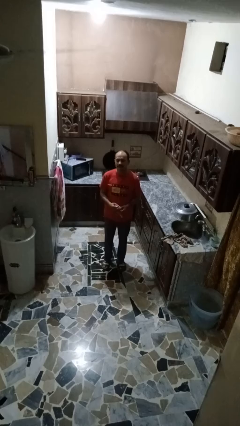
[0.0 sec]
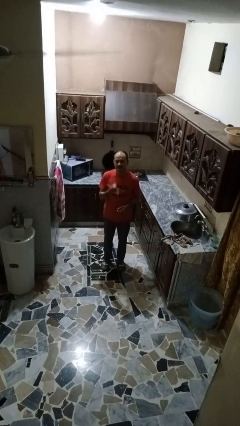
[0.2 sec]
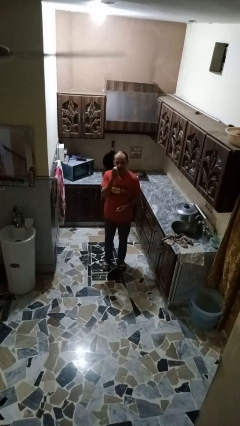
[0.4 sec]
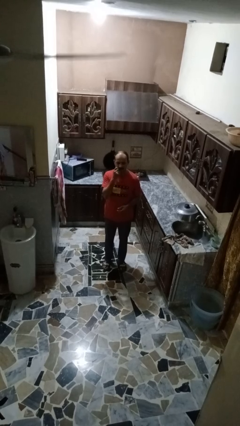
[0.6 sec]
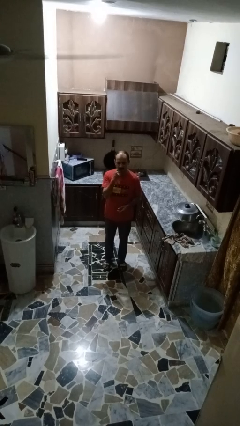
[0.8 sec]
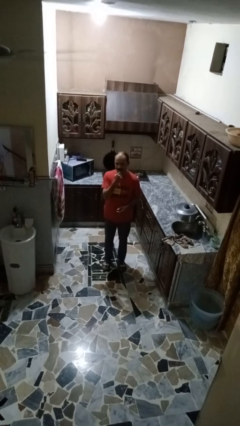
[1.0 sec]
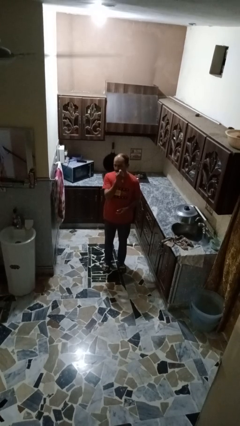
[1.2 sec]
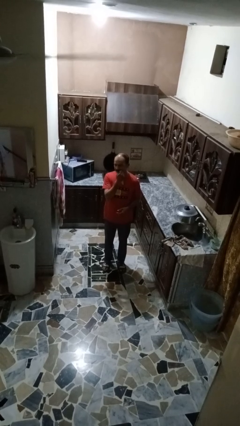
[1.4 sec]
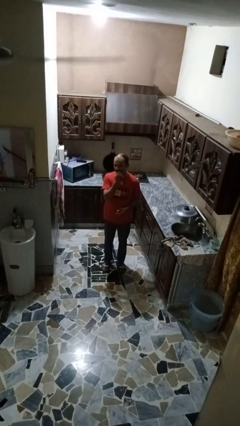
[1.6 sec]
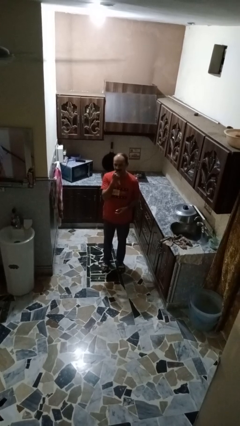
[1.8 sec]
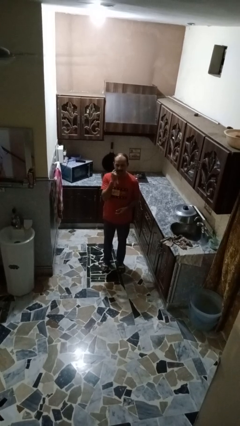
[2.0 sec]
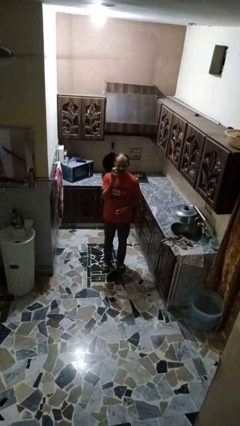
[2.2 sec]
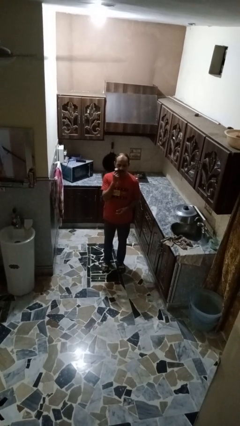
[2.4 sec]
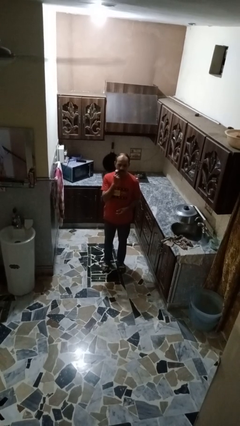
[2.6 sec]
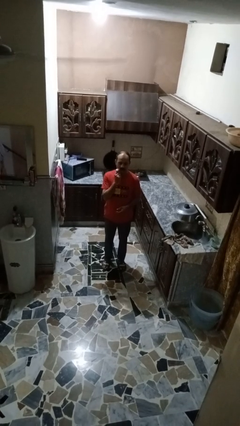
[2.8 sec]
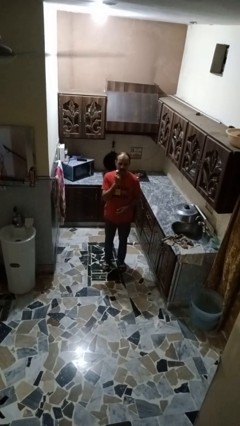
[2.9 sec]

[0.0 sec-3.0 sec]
person wipes mouth with napkin

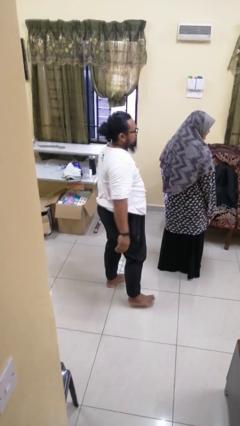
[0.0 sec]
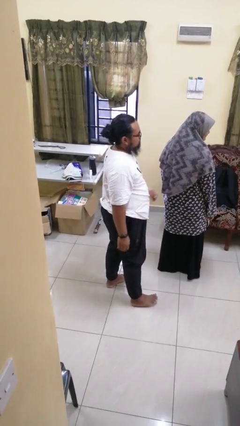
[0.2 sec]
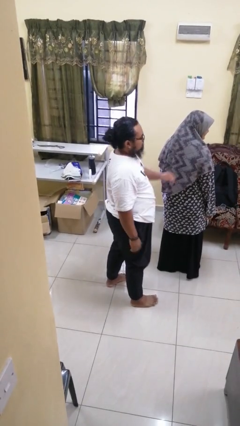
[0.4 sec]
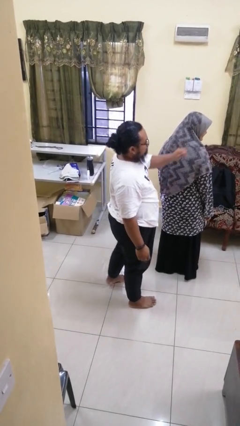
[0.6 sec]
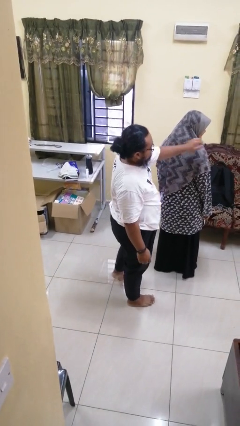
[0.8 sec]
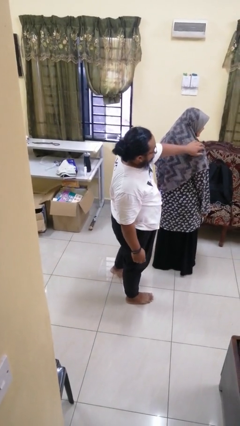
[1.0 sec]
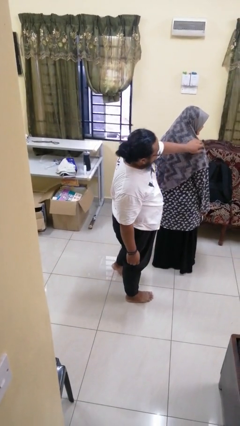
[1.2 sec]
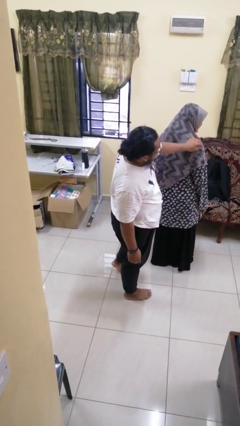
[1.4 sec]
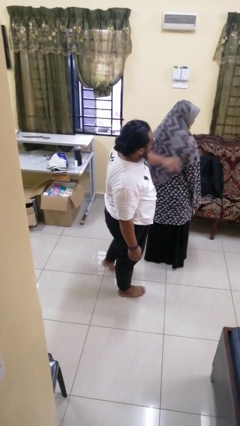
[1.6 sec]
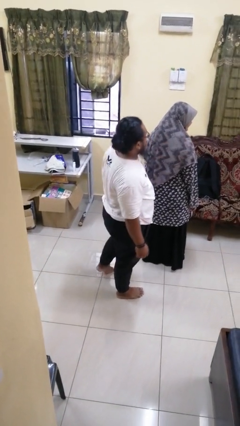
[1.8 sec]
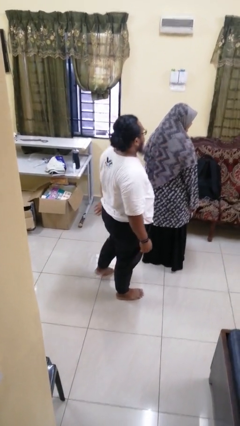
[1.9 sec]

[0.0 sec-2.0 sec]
person touches back of person

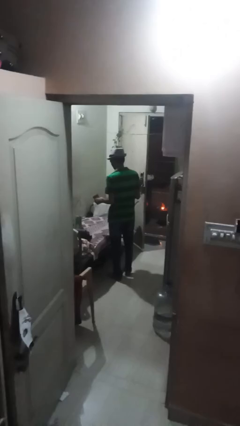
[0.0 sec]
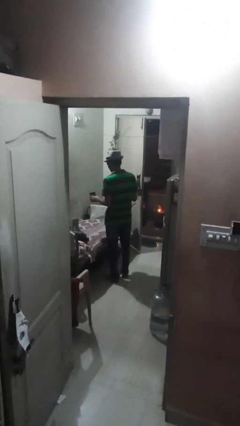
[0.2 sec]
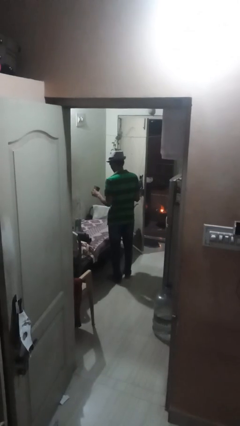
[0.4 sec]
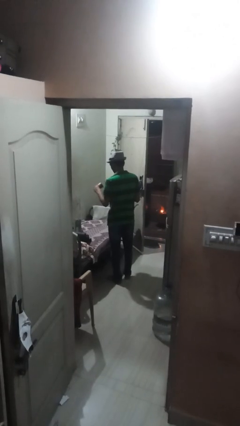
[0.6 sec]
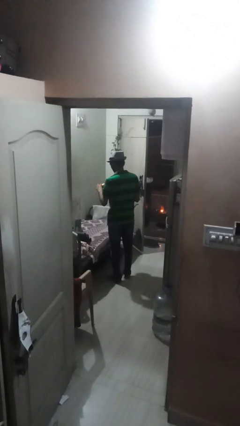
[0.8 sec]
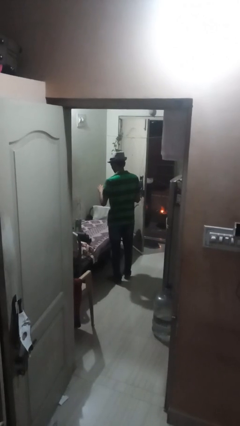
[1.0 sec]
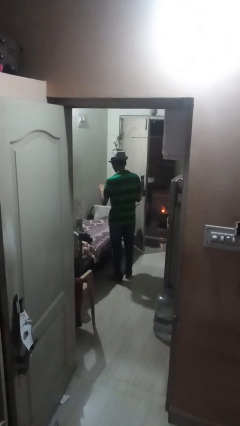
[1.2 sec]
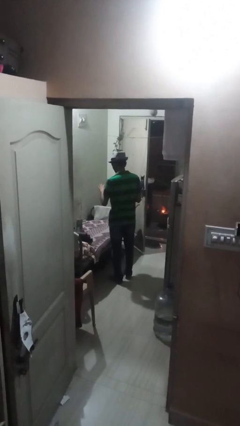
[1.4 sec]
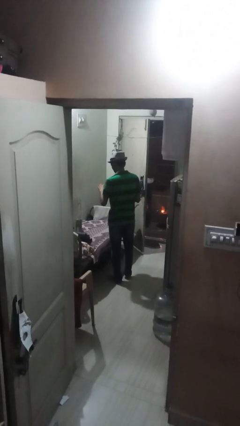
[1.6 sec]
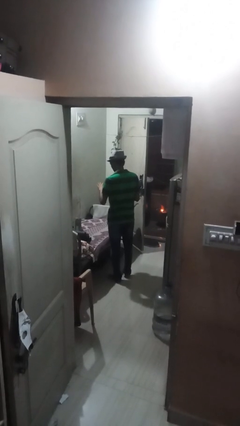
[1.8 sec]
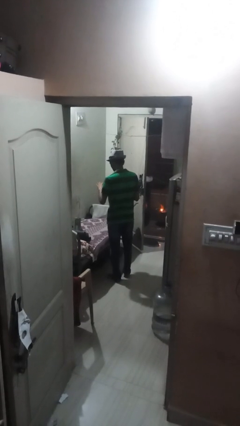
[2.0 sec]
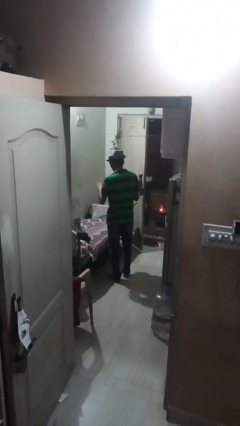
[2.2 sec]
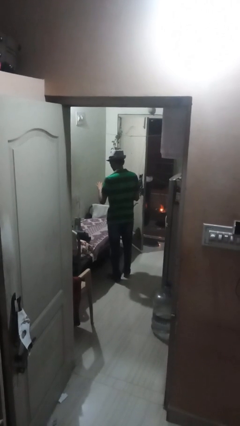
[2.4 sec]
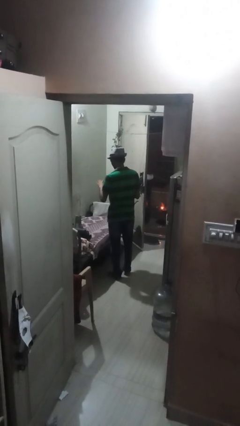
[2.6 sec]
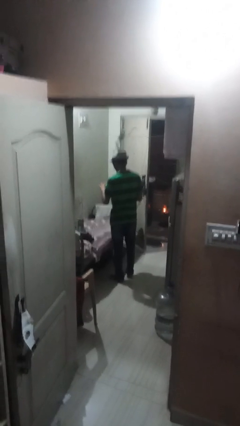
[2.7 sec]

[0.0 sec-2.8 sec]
person pours coffee into mug

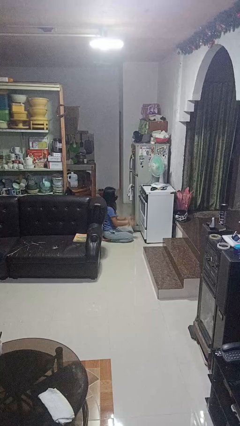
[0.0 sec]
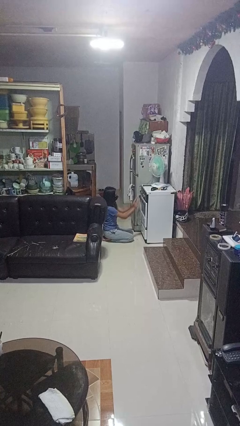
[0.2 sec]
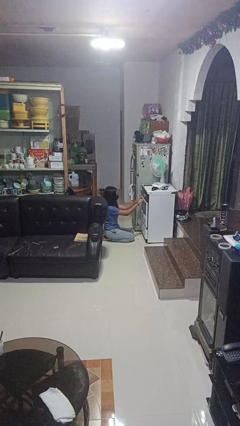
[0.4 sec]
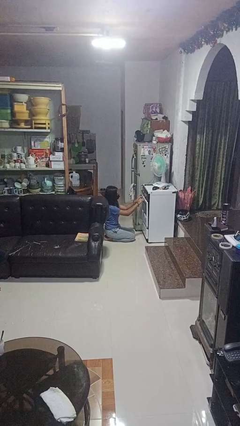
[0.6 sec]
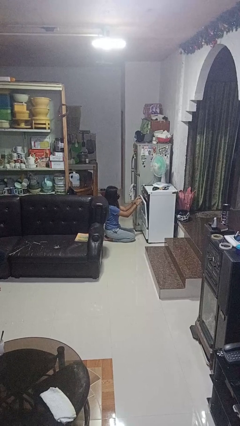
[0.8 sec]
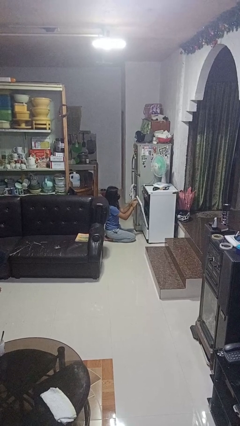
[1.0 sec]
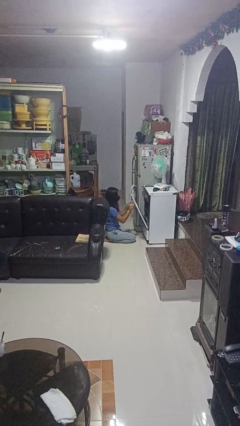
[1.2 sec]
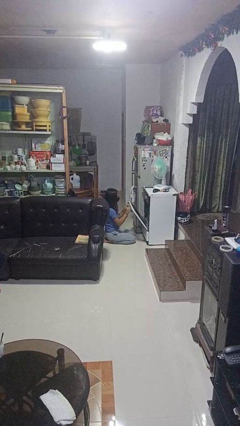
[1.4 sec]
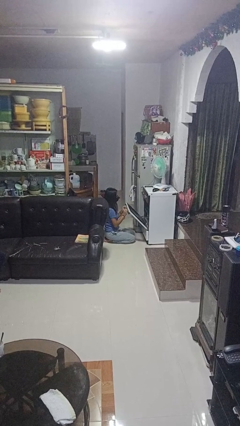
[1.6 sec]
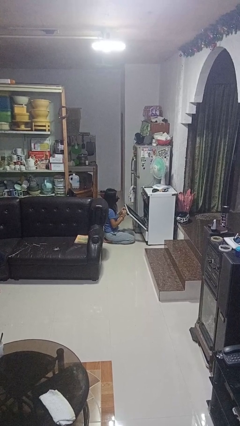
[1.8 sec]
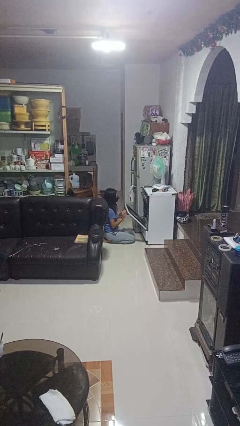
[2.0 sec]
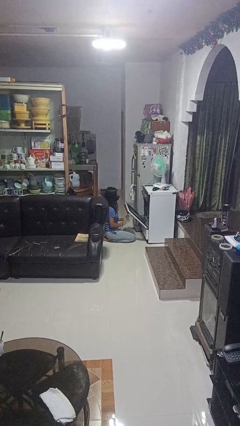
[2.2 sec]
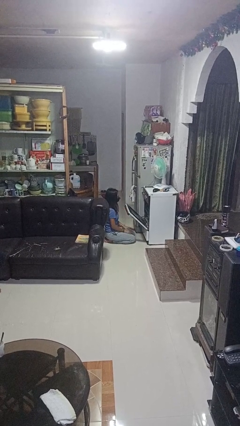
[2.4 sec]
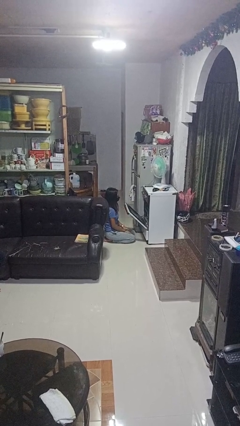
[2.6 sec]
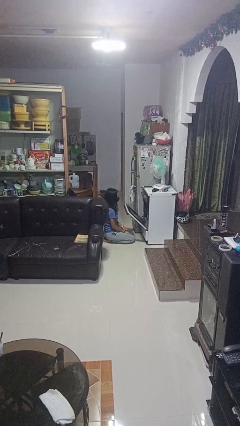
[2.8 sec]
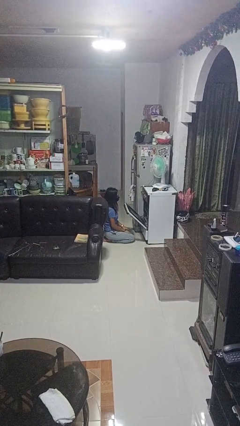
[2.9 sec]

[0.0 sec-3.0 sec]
person opens oven door

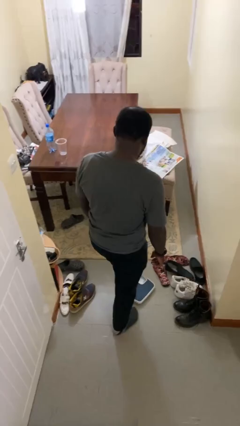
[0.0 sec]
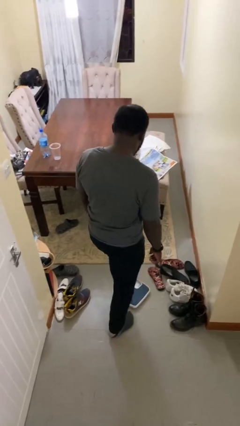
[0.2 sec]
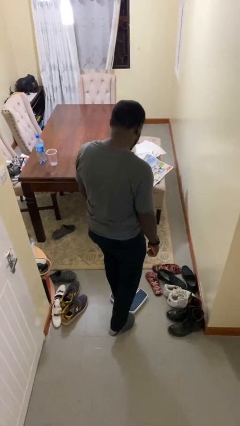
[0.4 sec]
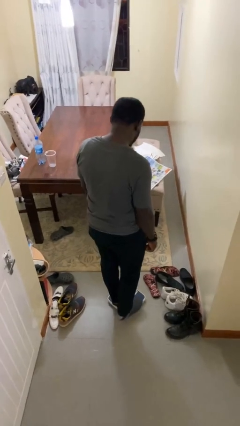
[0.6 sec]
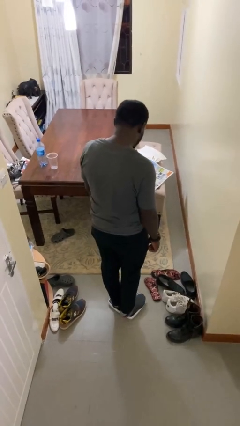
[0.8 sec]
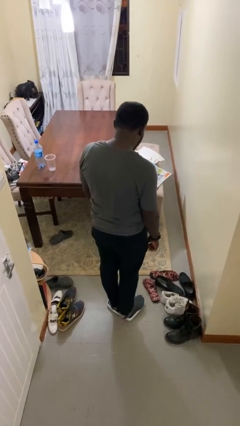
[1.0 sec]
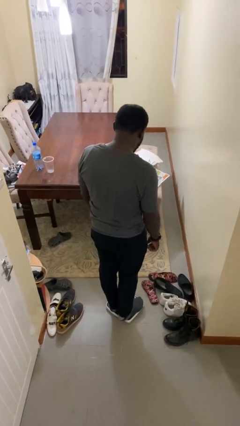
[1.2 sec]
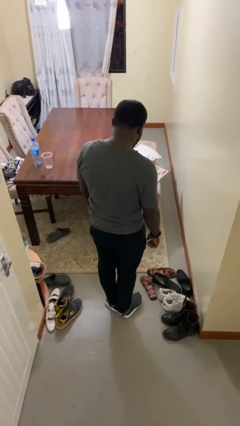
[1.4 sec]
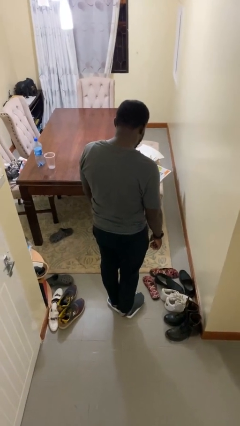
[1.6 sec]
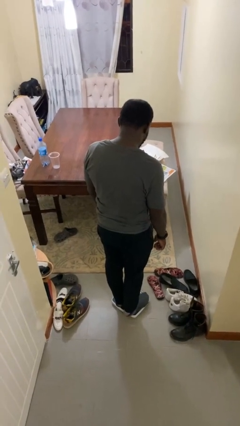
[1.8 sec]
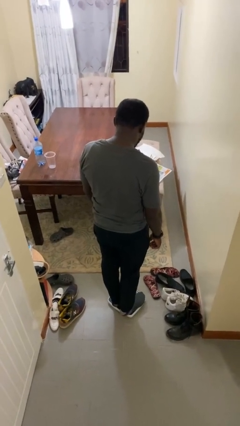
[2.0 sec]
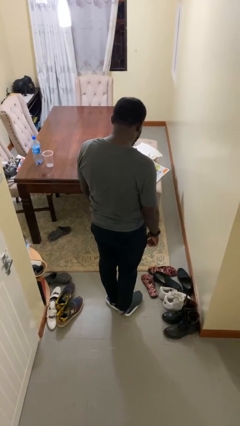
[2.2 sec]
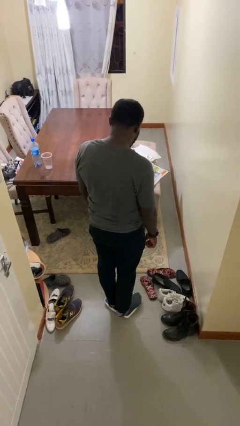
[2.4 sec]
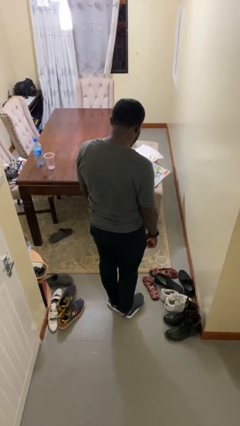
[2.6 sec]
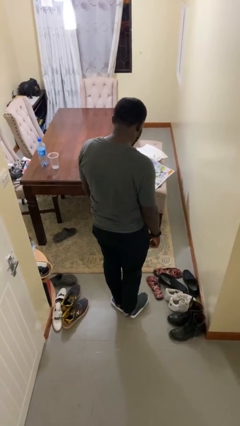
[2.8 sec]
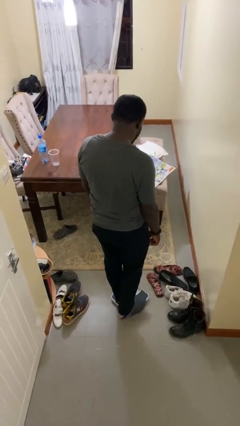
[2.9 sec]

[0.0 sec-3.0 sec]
person uses bodyweight scale

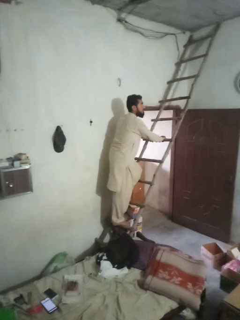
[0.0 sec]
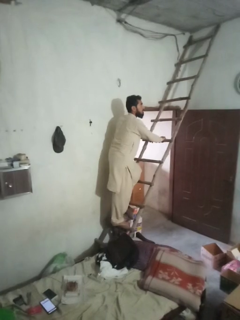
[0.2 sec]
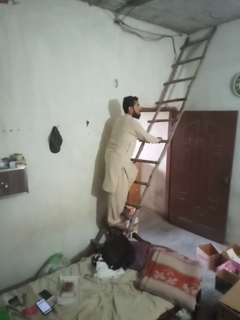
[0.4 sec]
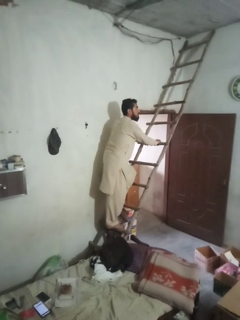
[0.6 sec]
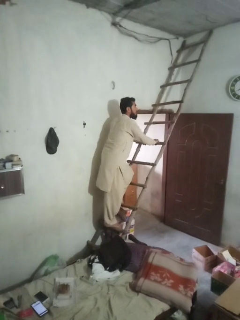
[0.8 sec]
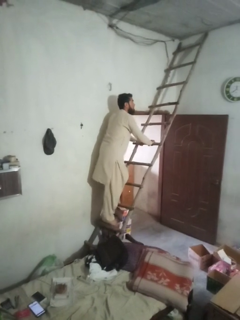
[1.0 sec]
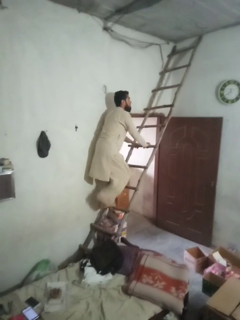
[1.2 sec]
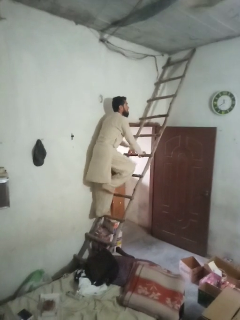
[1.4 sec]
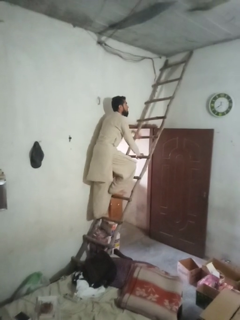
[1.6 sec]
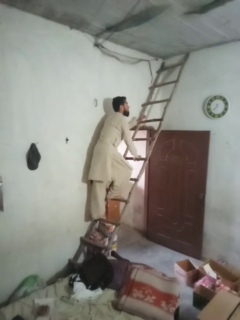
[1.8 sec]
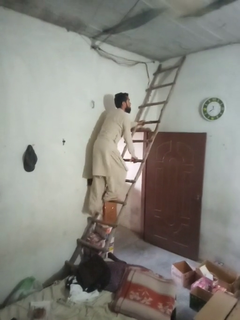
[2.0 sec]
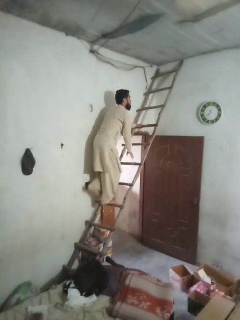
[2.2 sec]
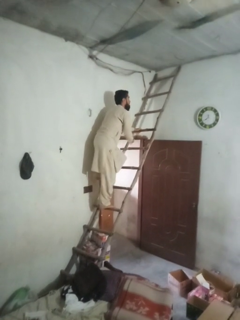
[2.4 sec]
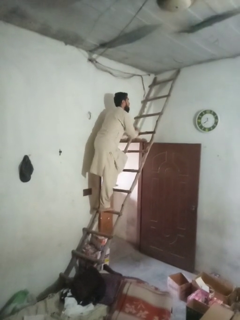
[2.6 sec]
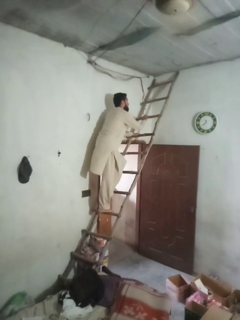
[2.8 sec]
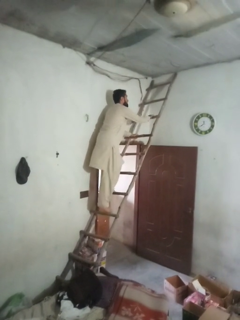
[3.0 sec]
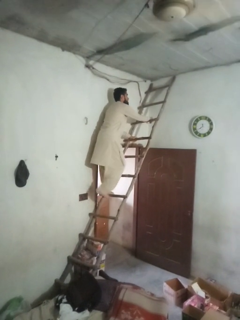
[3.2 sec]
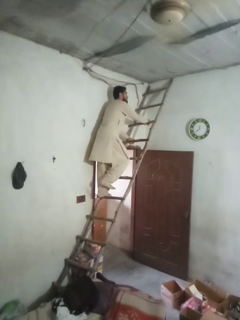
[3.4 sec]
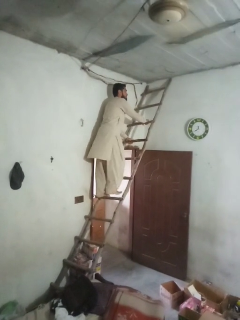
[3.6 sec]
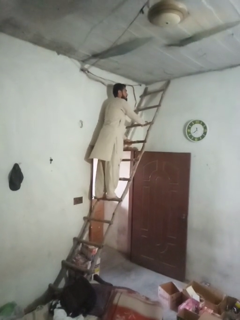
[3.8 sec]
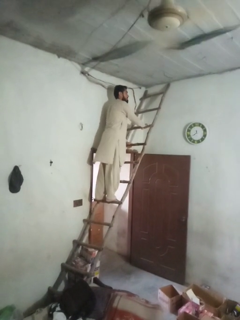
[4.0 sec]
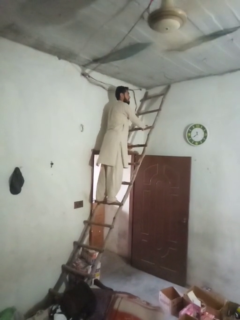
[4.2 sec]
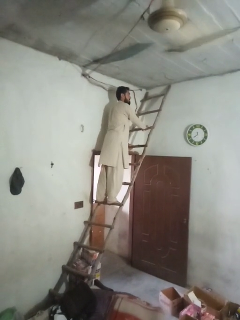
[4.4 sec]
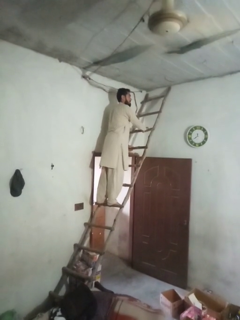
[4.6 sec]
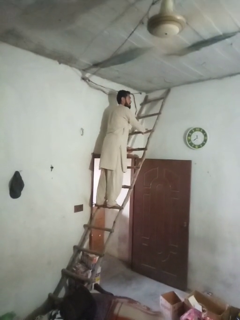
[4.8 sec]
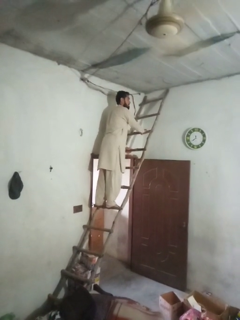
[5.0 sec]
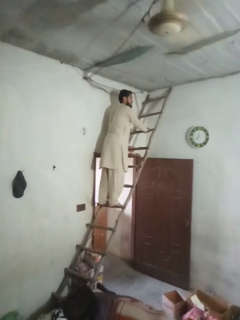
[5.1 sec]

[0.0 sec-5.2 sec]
person climbs up ladder
